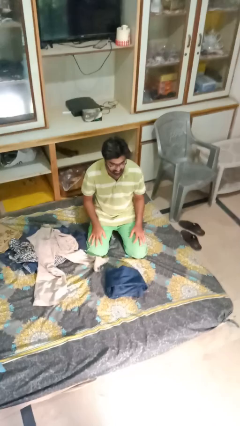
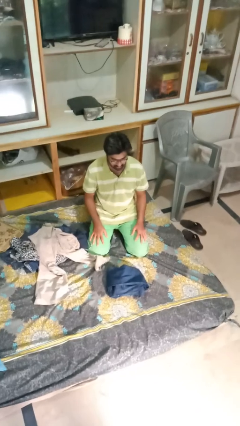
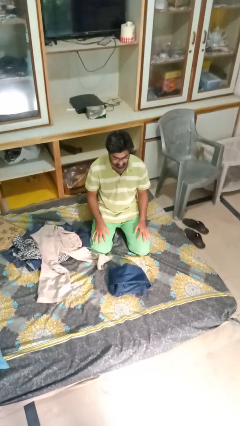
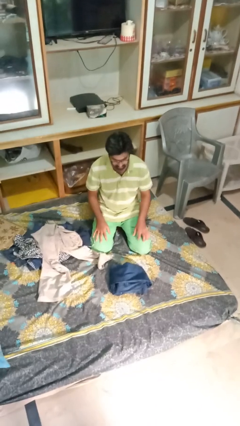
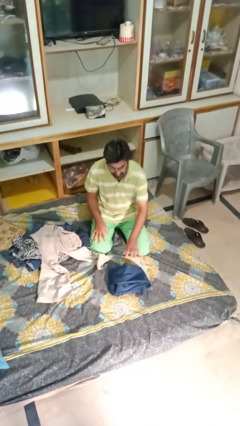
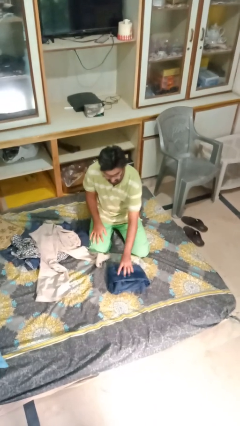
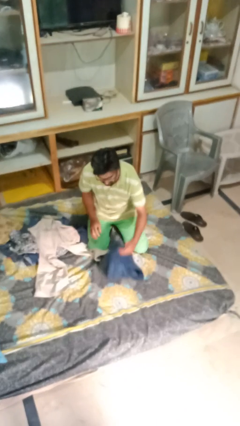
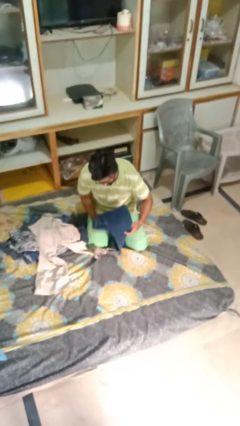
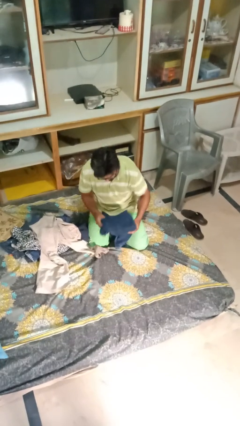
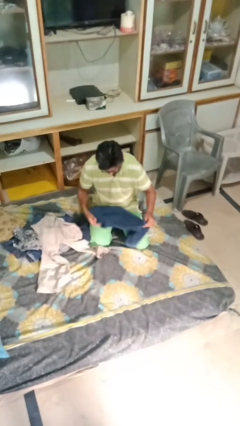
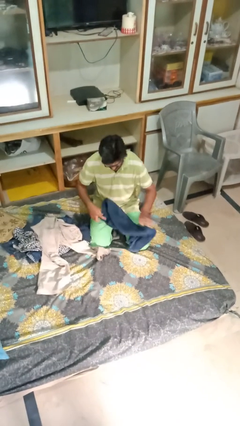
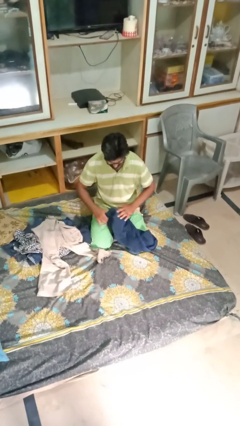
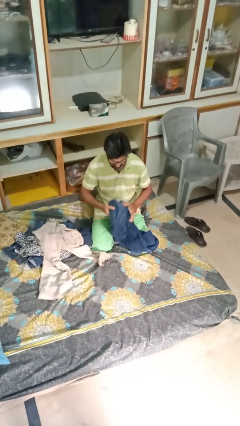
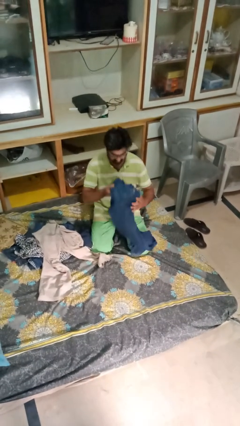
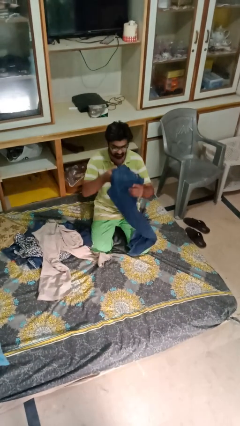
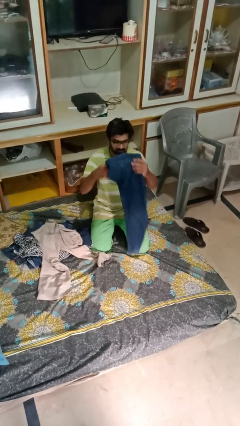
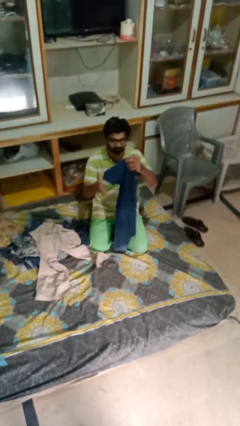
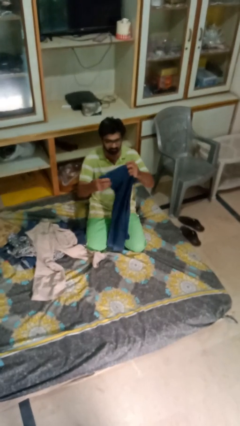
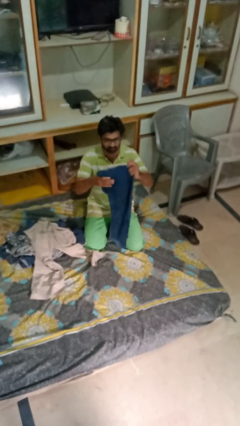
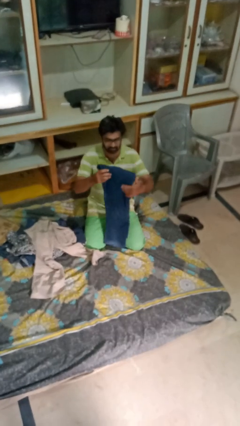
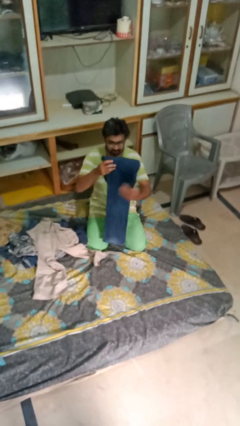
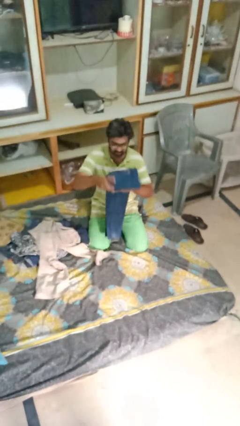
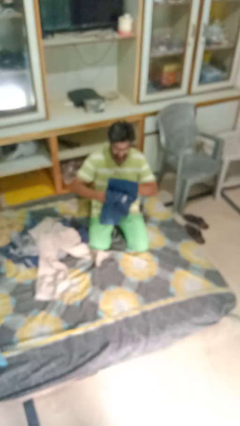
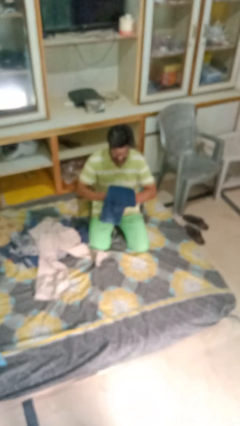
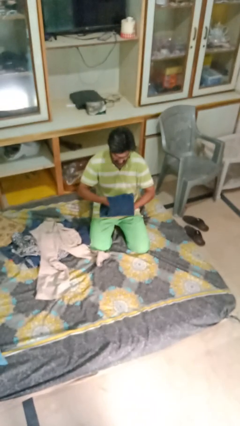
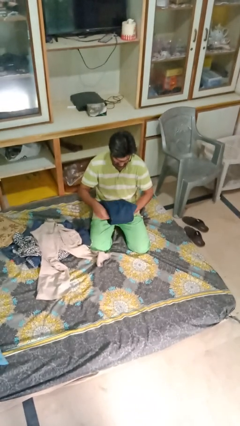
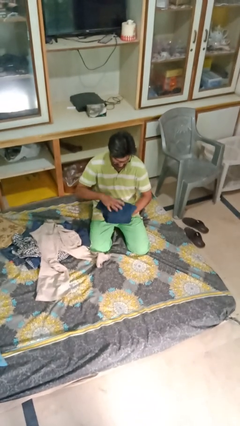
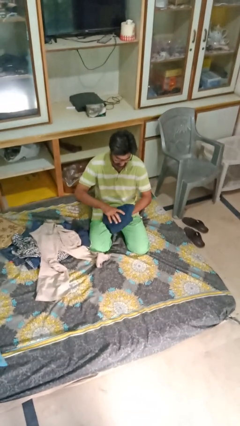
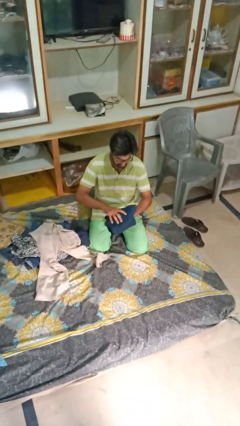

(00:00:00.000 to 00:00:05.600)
person folds pants

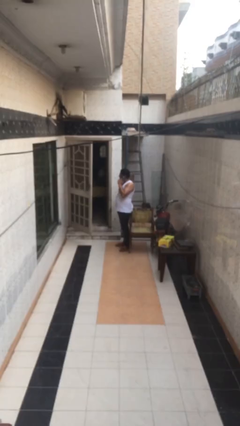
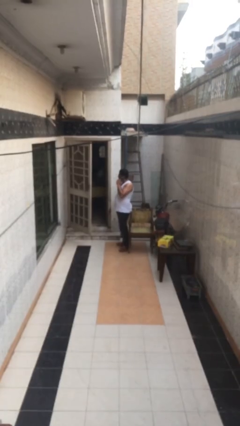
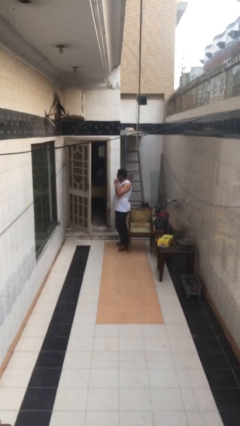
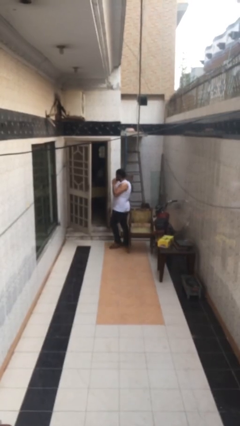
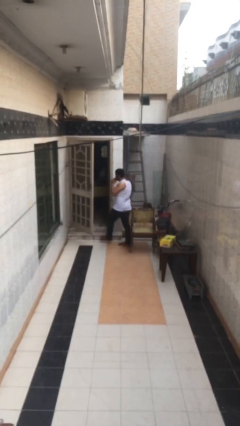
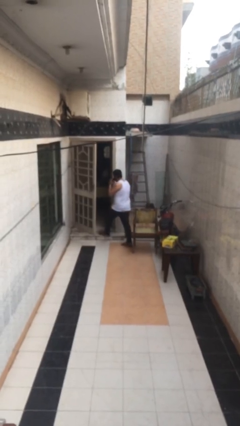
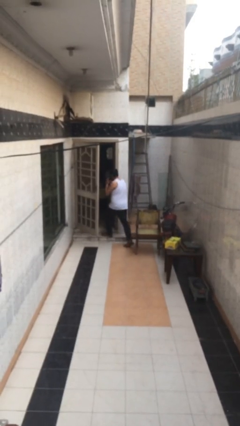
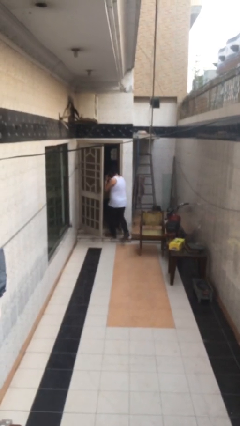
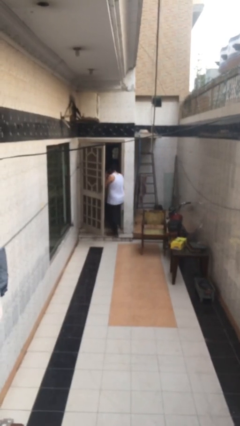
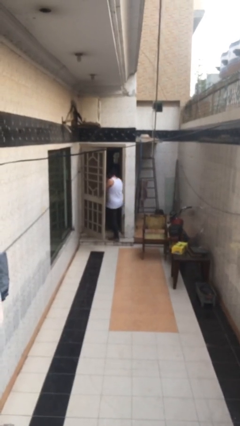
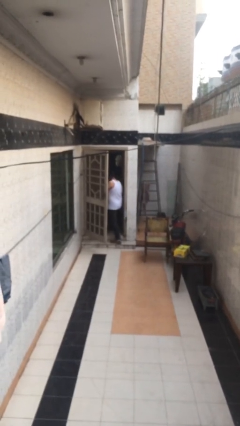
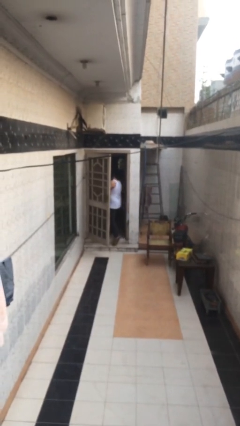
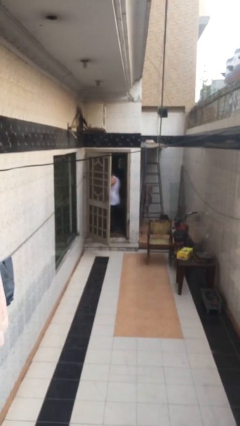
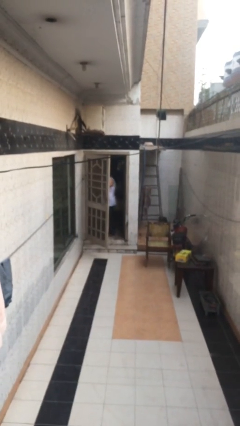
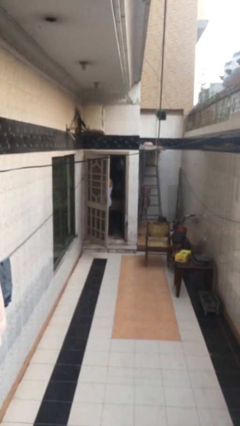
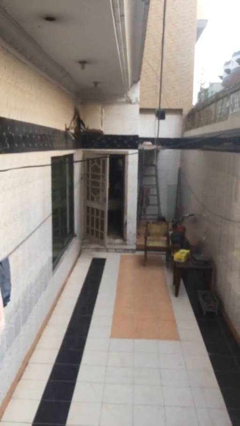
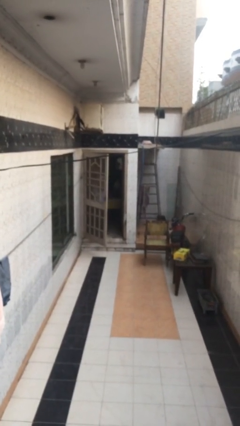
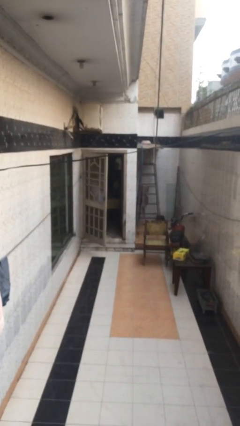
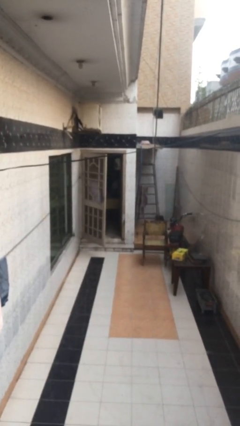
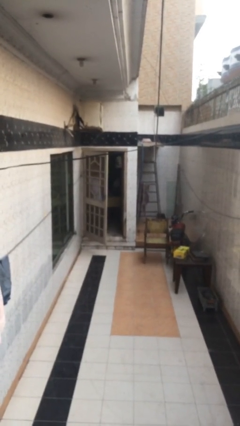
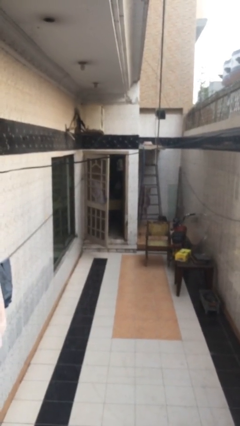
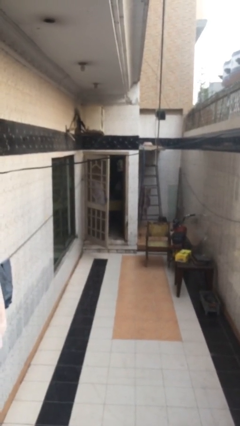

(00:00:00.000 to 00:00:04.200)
person exits scene through structure

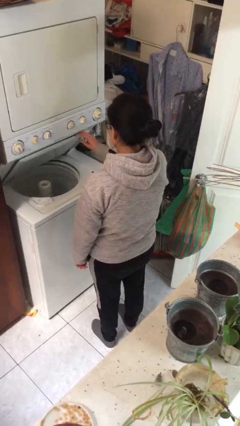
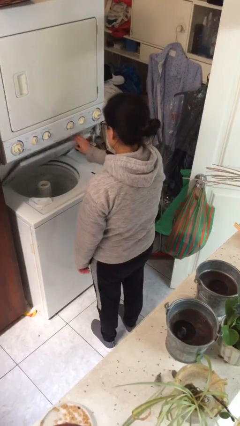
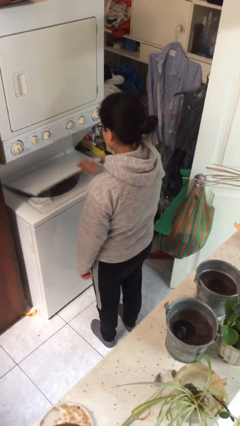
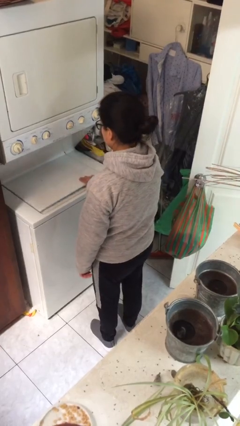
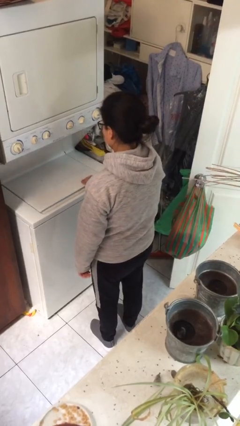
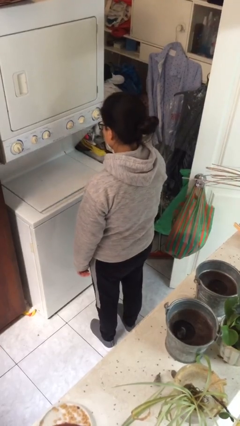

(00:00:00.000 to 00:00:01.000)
person closes clothes washer

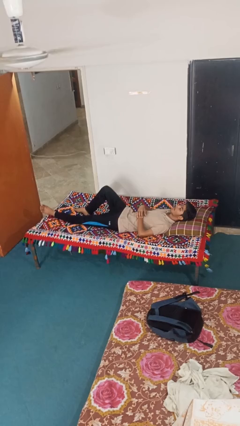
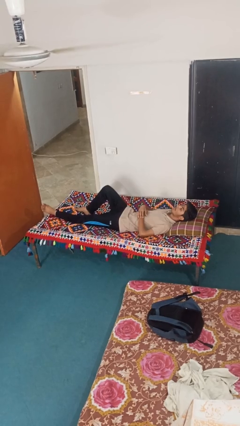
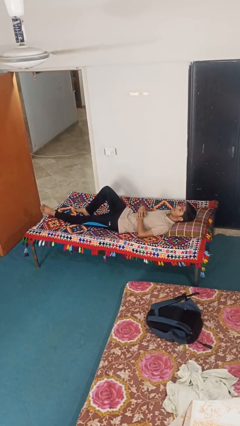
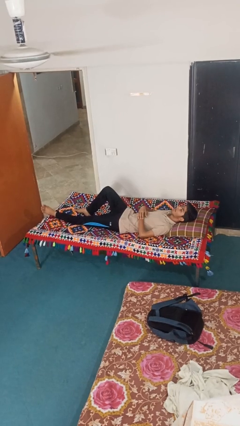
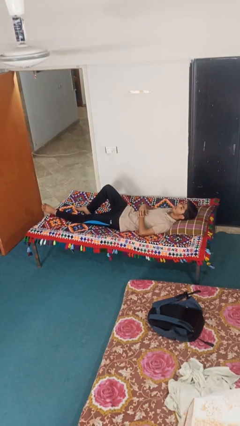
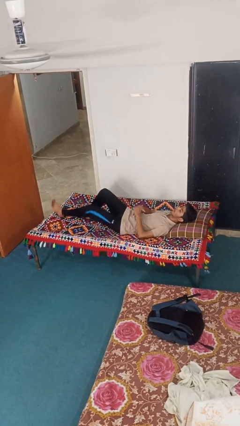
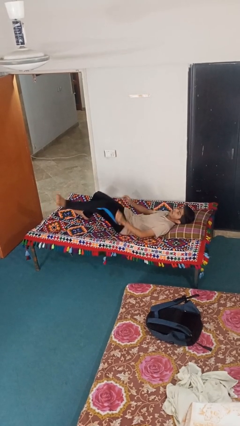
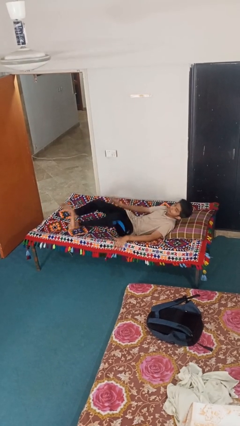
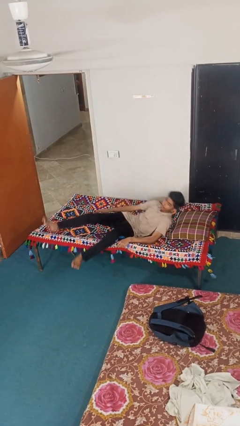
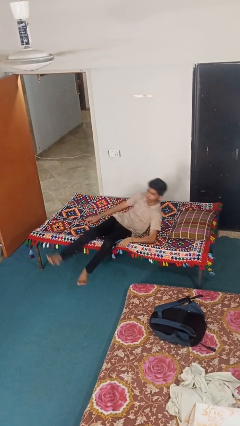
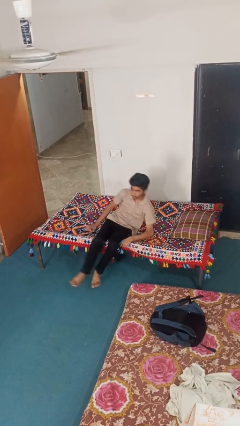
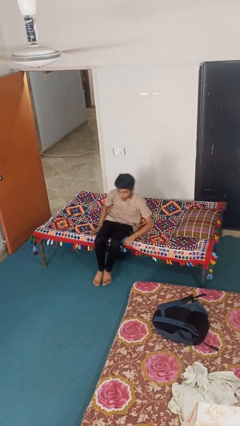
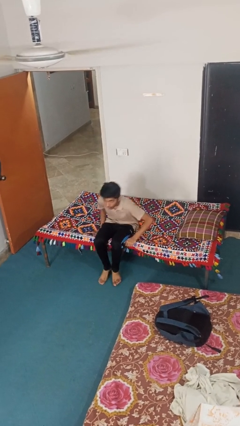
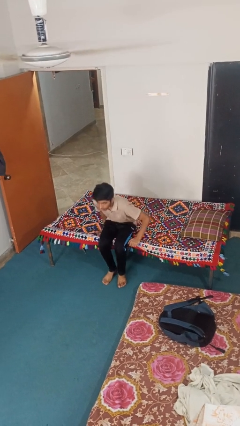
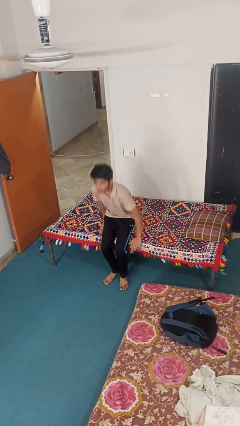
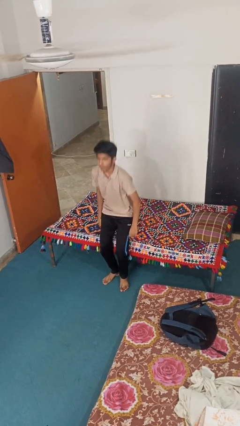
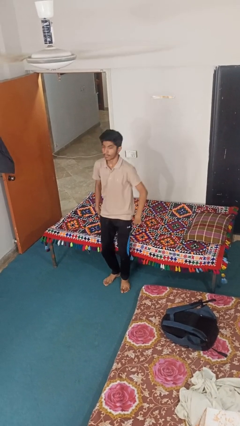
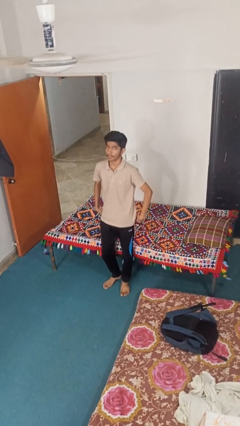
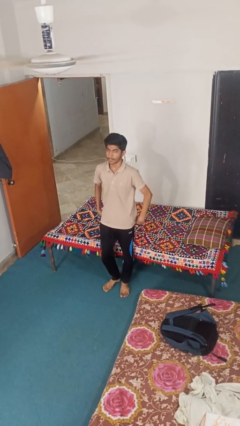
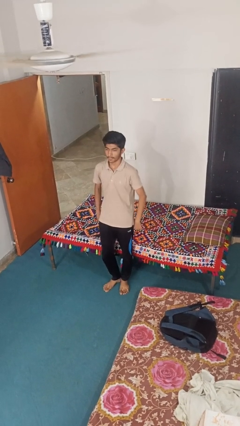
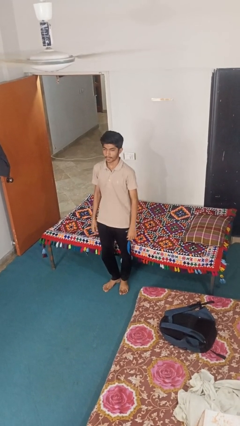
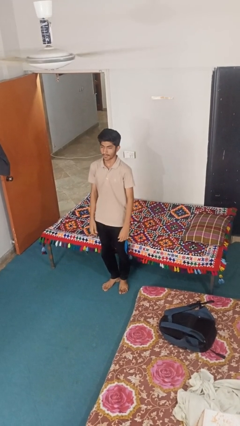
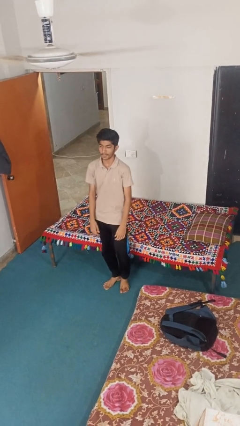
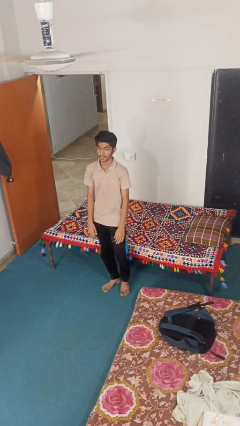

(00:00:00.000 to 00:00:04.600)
person stands up

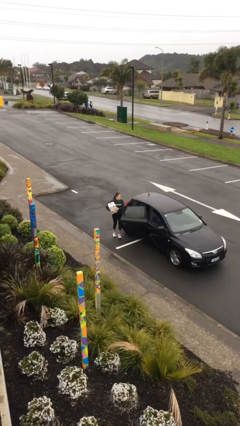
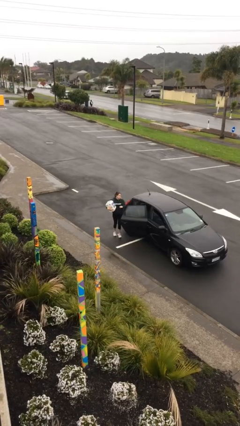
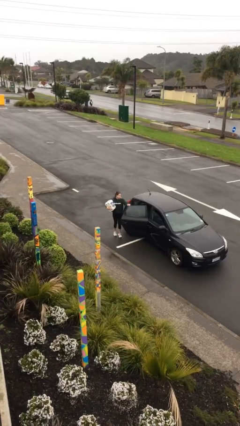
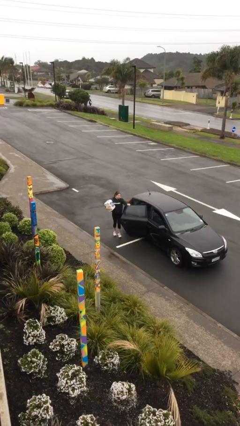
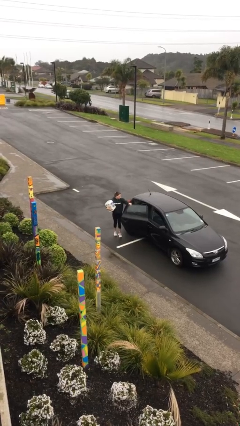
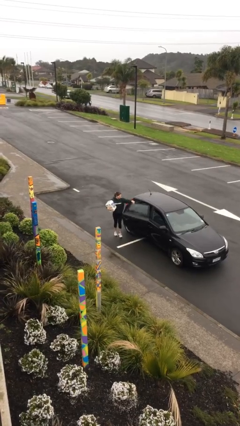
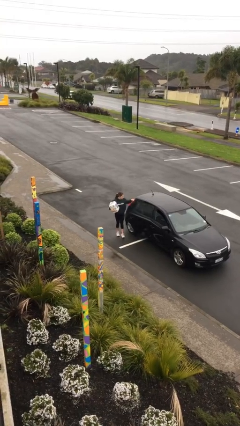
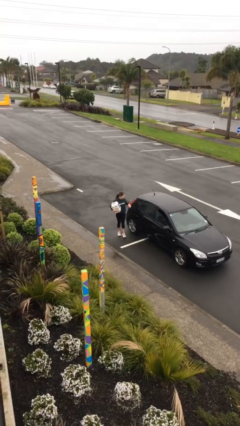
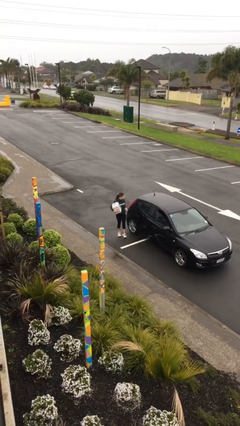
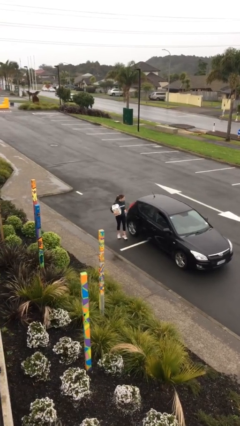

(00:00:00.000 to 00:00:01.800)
person closes car door

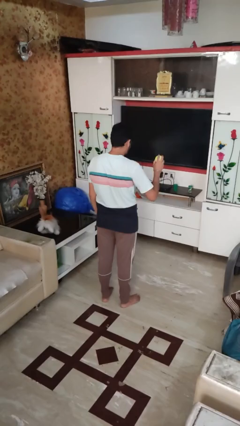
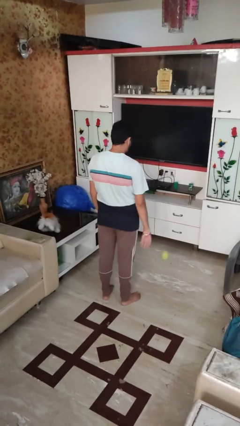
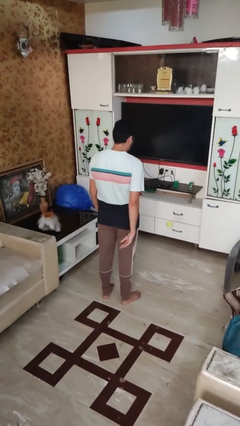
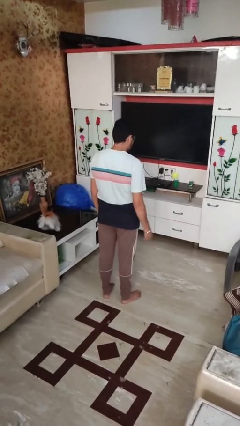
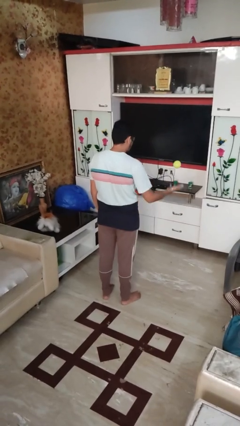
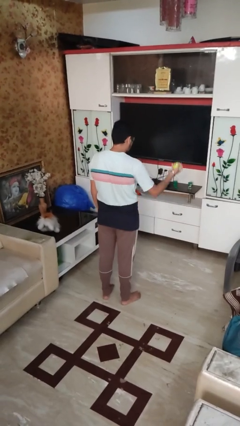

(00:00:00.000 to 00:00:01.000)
person bounces ball on floor
